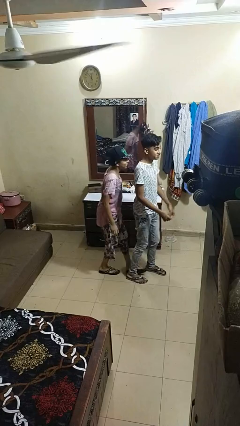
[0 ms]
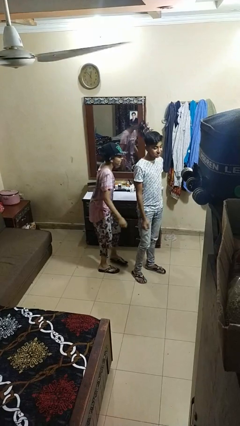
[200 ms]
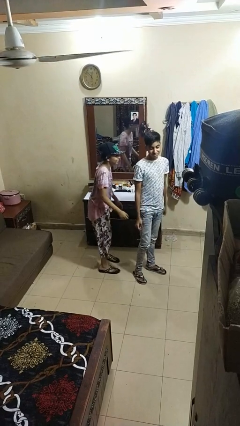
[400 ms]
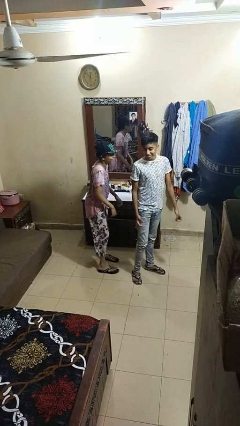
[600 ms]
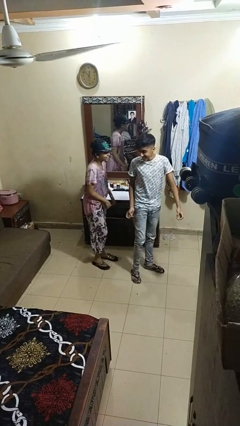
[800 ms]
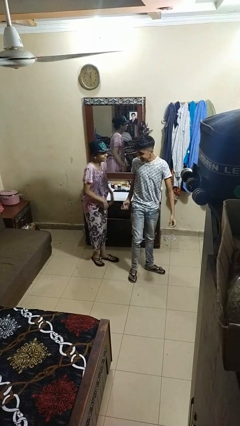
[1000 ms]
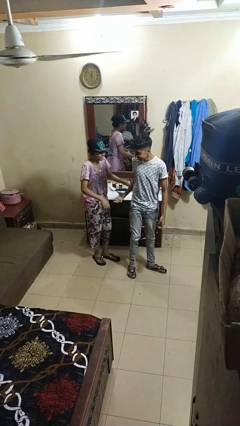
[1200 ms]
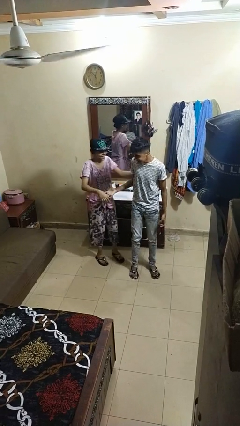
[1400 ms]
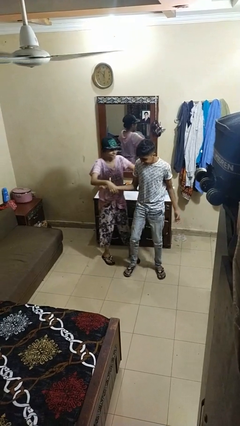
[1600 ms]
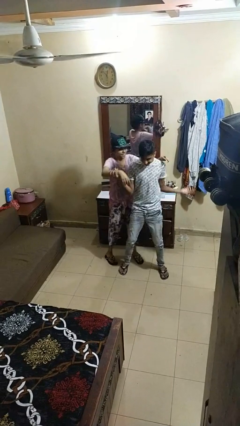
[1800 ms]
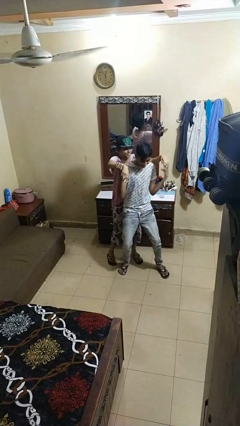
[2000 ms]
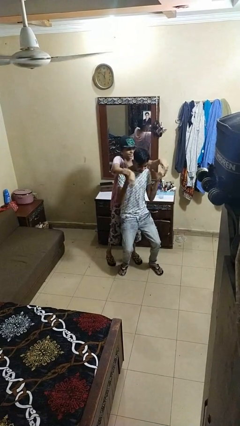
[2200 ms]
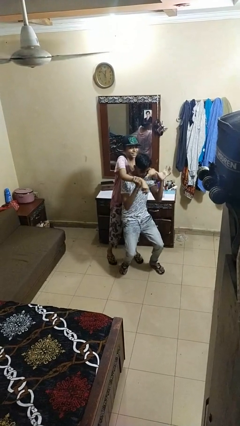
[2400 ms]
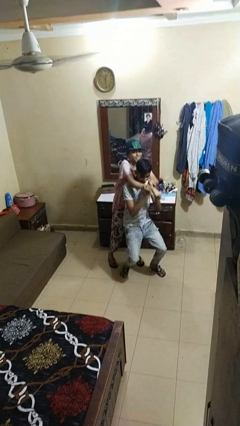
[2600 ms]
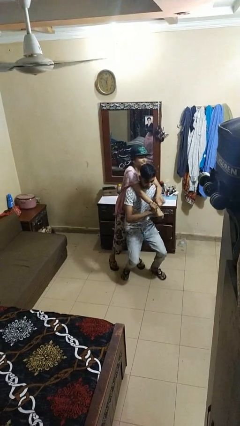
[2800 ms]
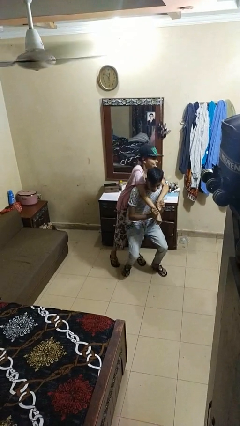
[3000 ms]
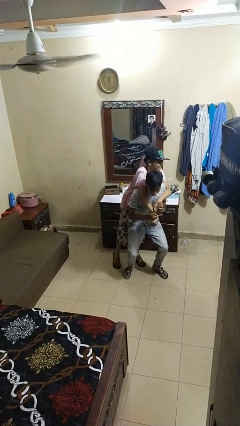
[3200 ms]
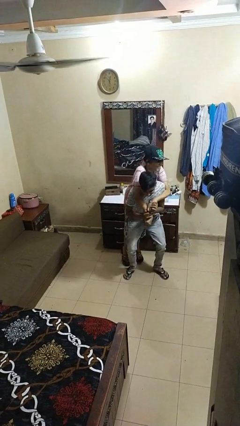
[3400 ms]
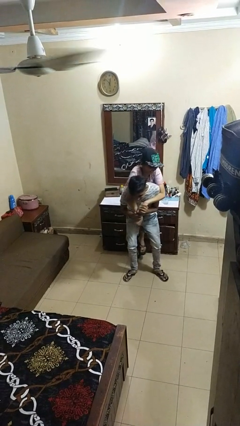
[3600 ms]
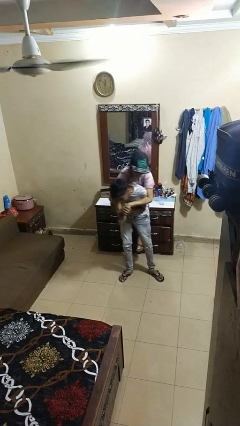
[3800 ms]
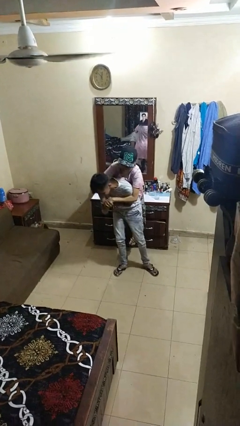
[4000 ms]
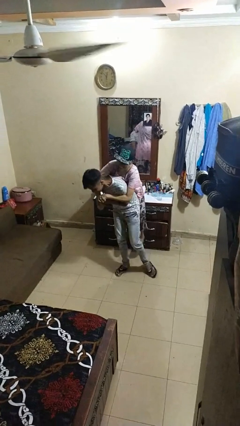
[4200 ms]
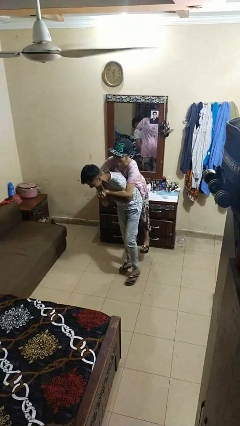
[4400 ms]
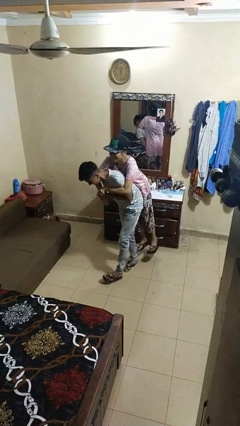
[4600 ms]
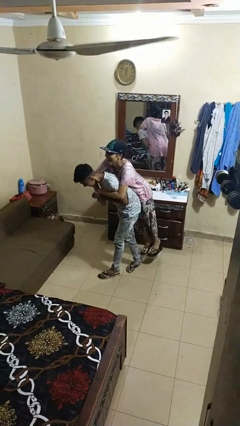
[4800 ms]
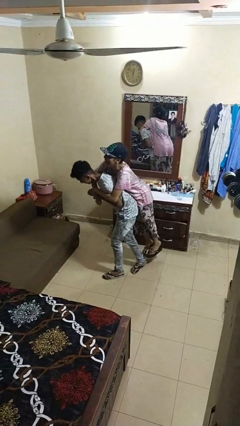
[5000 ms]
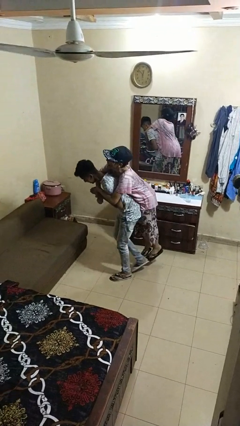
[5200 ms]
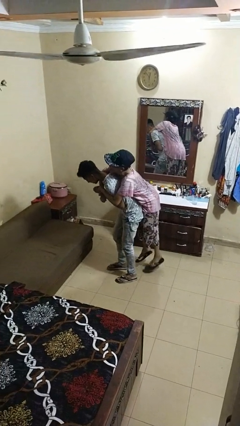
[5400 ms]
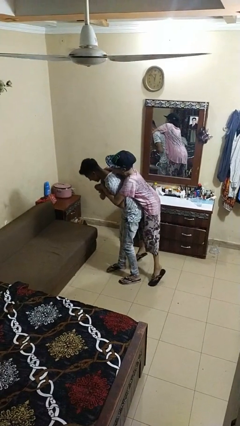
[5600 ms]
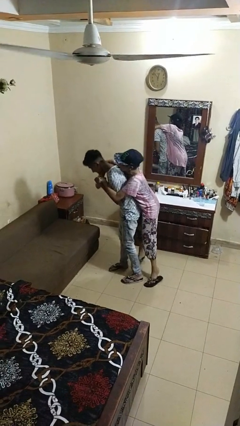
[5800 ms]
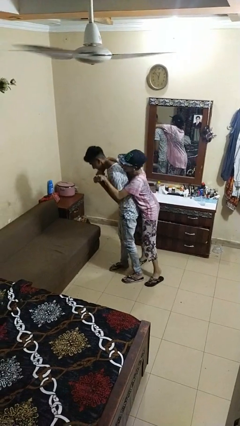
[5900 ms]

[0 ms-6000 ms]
person carries person on back

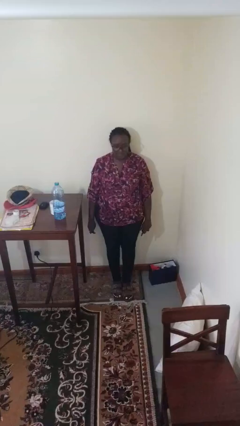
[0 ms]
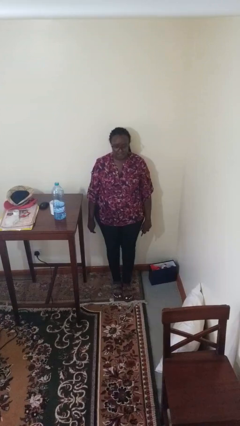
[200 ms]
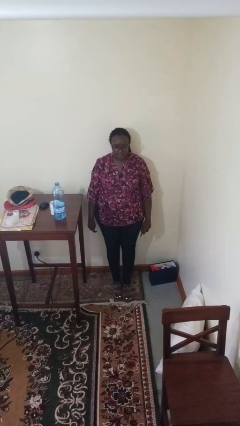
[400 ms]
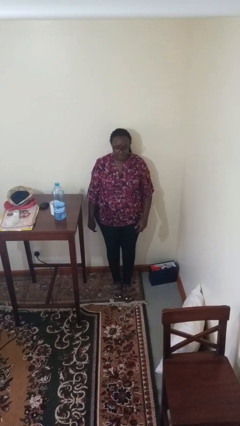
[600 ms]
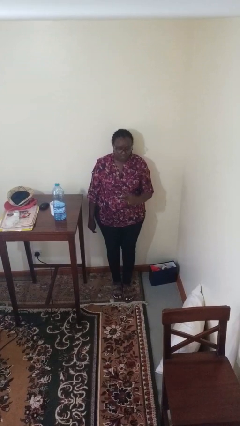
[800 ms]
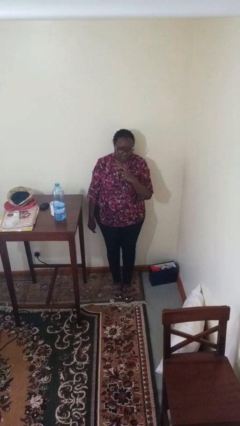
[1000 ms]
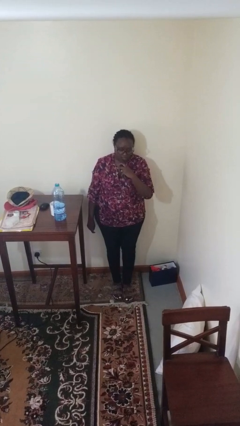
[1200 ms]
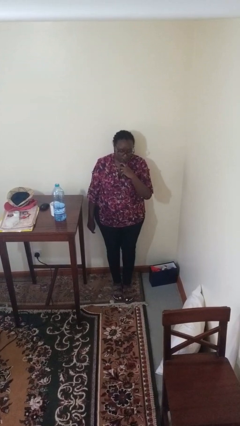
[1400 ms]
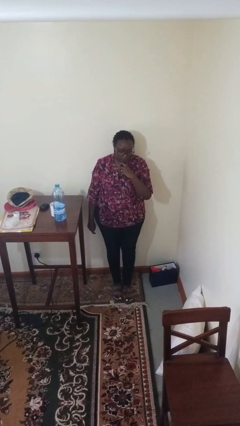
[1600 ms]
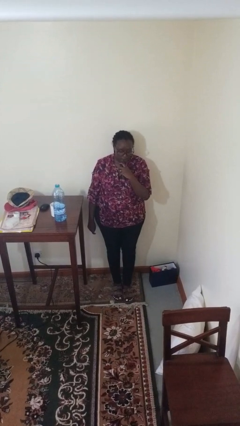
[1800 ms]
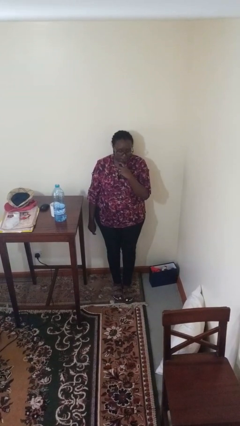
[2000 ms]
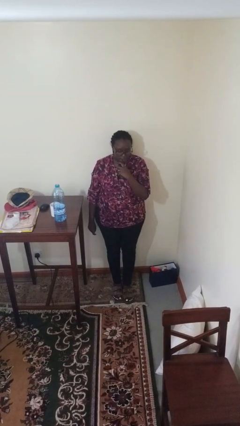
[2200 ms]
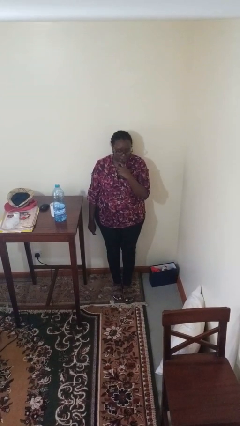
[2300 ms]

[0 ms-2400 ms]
person vapes

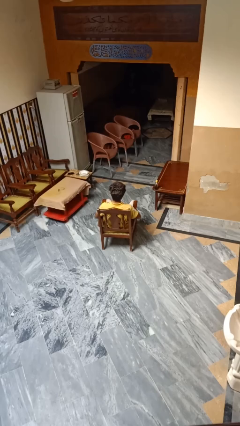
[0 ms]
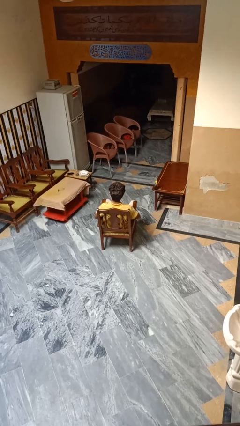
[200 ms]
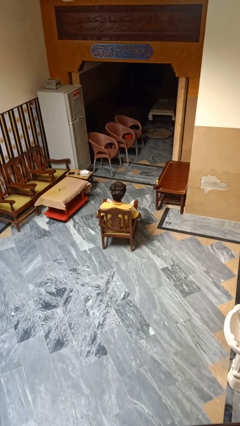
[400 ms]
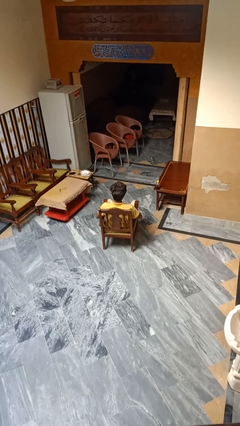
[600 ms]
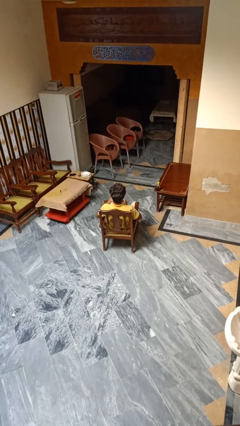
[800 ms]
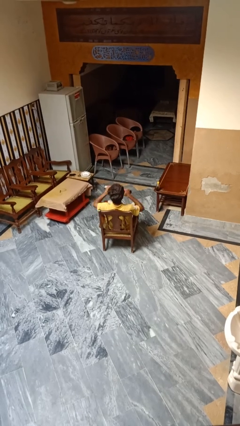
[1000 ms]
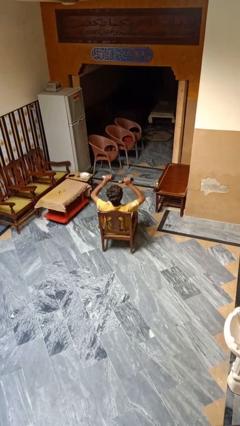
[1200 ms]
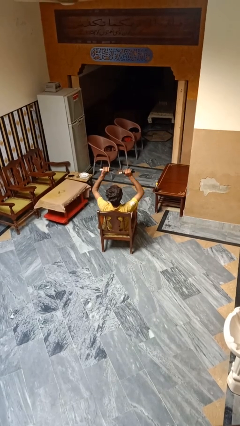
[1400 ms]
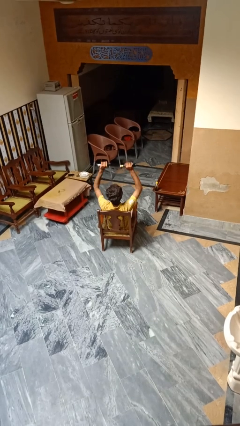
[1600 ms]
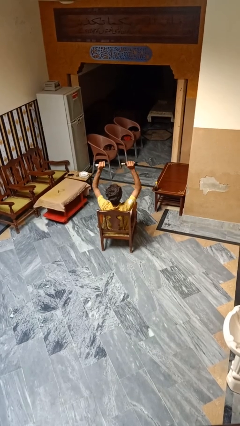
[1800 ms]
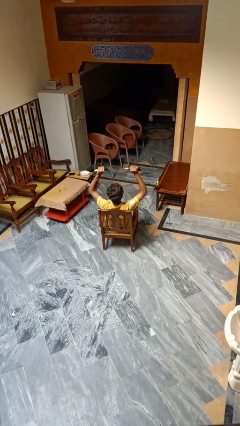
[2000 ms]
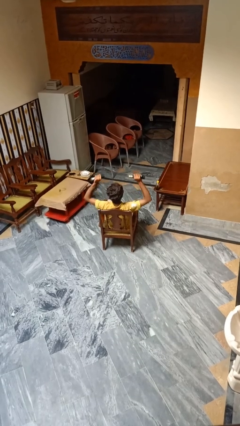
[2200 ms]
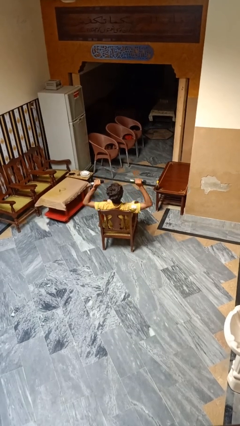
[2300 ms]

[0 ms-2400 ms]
person lifts dumbbells

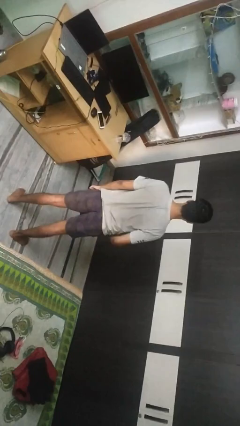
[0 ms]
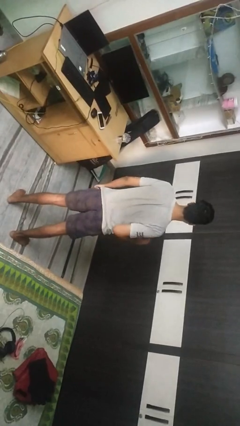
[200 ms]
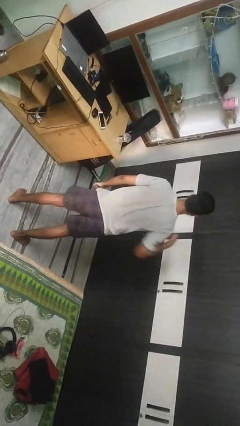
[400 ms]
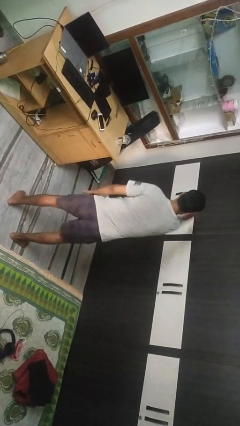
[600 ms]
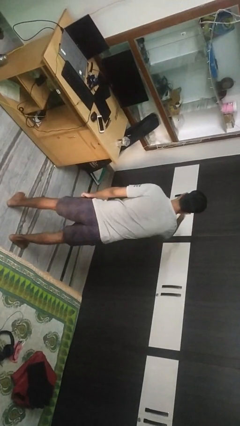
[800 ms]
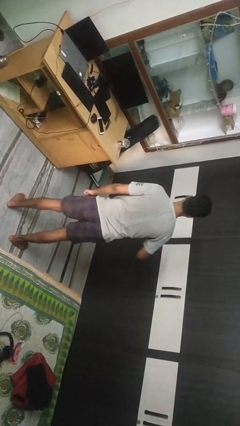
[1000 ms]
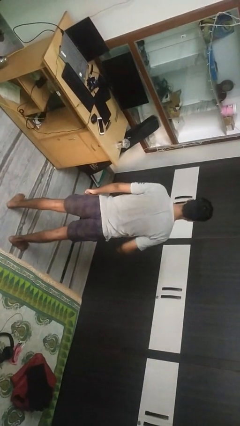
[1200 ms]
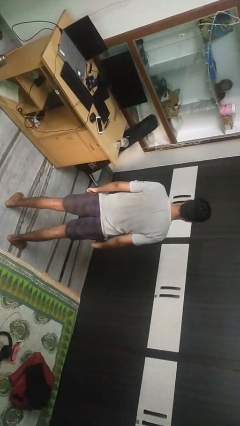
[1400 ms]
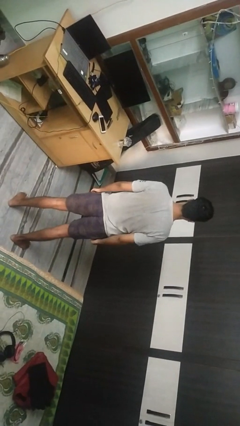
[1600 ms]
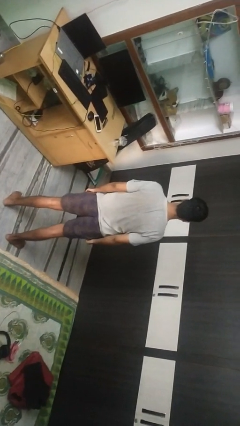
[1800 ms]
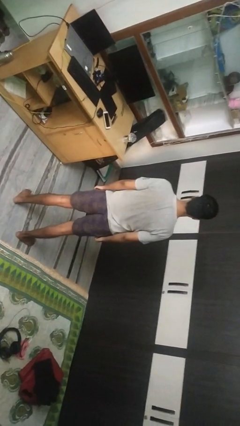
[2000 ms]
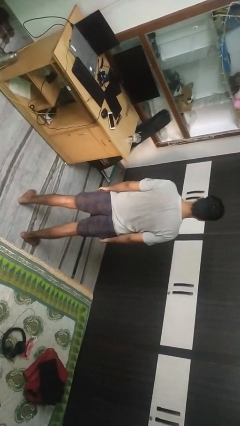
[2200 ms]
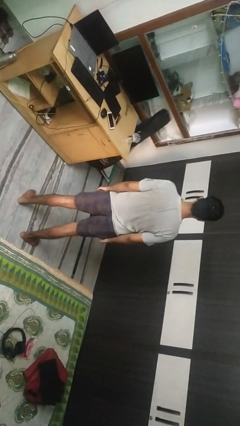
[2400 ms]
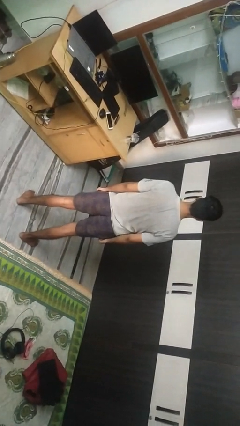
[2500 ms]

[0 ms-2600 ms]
person punches

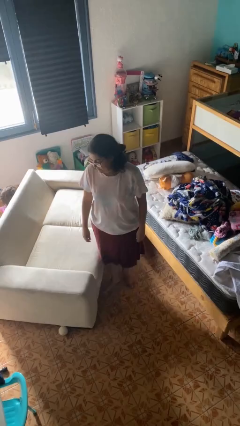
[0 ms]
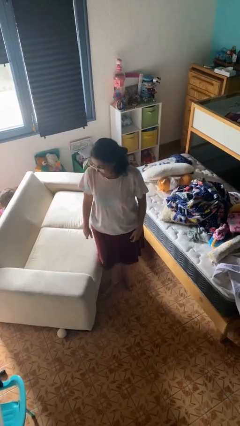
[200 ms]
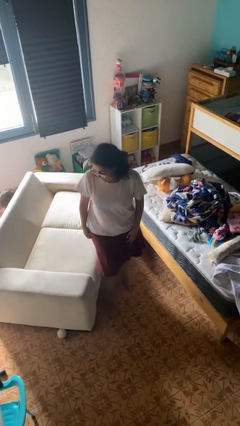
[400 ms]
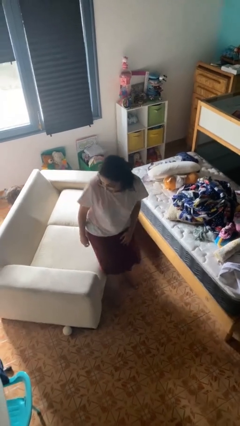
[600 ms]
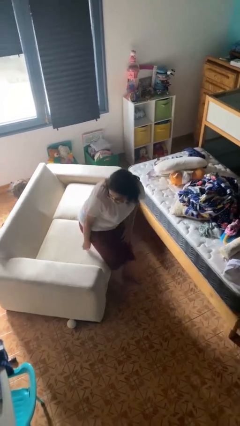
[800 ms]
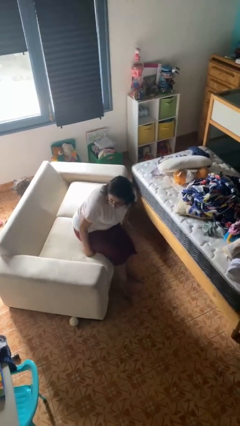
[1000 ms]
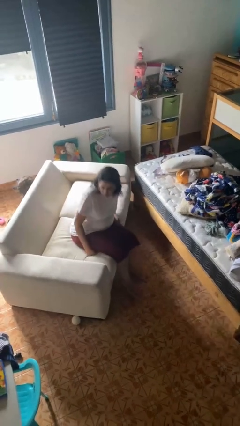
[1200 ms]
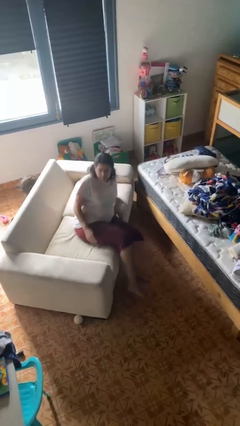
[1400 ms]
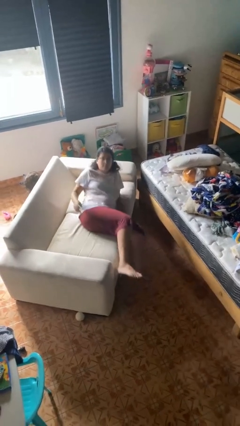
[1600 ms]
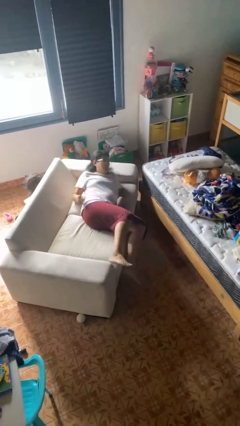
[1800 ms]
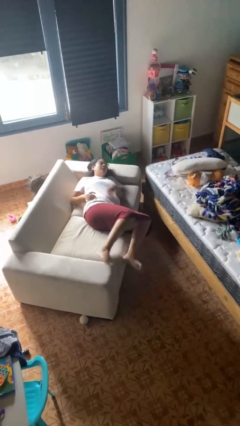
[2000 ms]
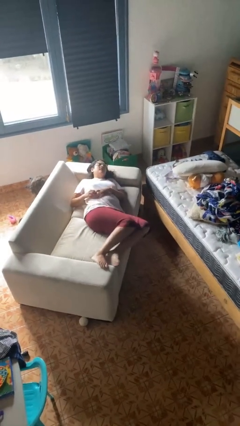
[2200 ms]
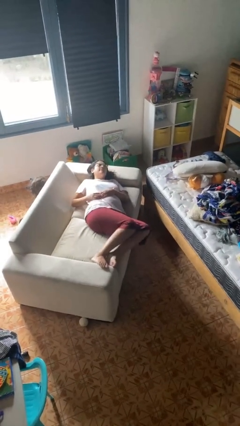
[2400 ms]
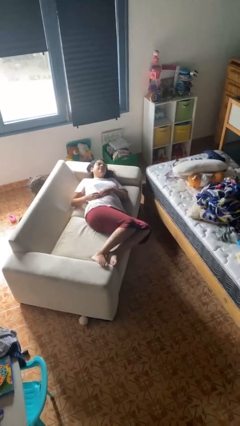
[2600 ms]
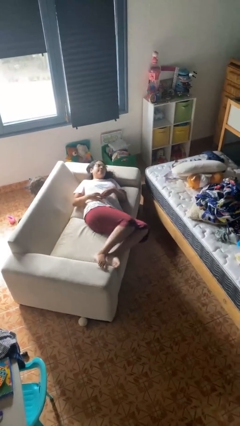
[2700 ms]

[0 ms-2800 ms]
person lies down on couch

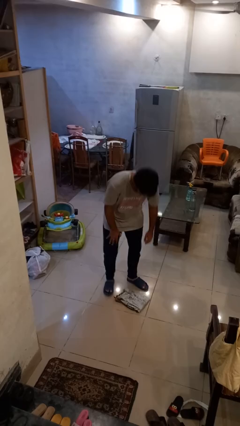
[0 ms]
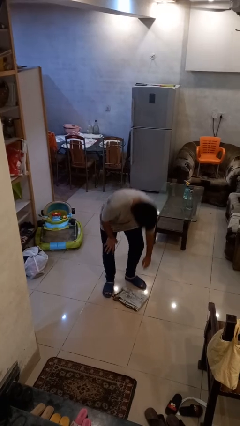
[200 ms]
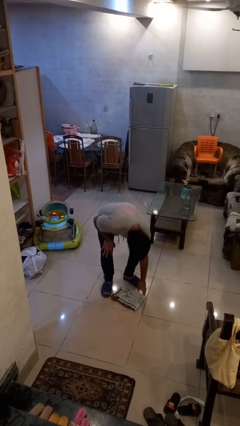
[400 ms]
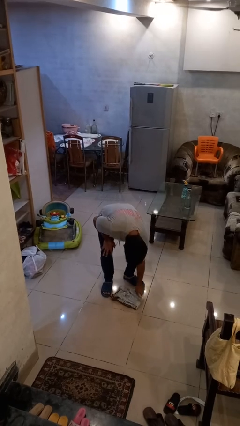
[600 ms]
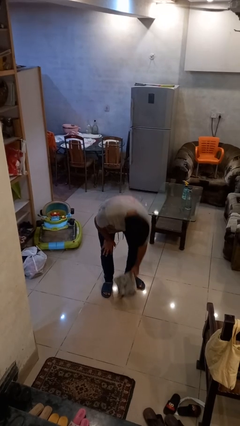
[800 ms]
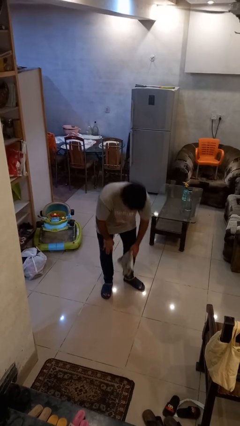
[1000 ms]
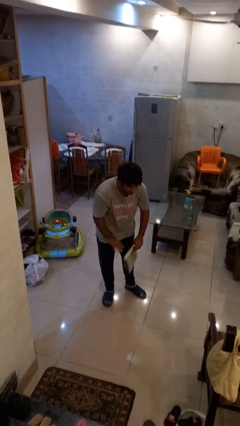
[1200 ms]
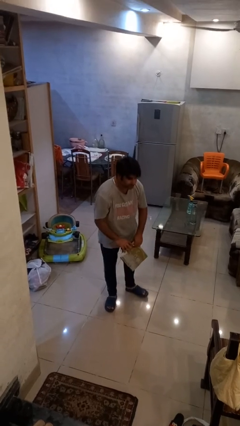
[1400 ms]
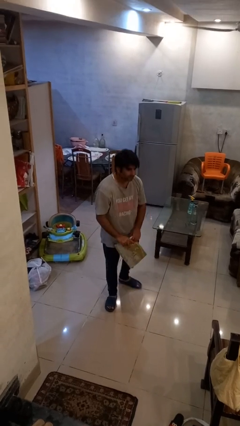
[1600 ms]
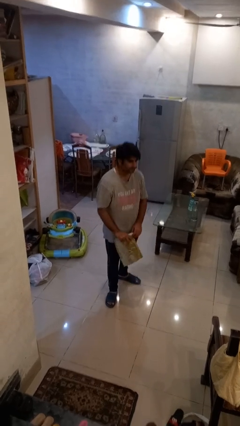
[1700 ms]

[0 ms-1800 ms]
person picks up object from floor
